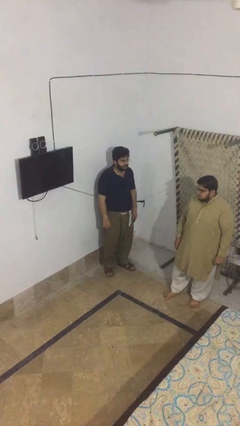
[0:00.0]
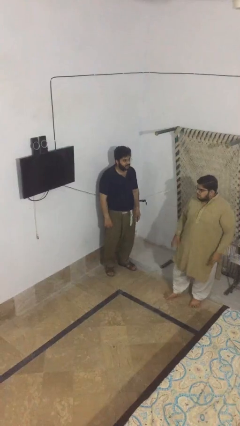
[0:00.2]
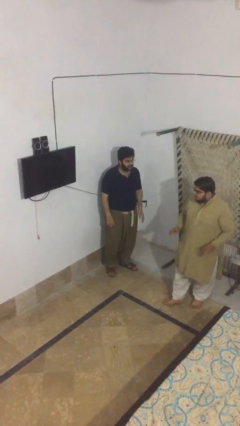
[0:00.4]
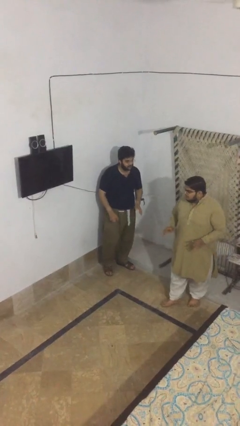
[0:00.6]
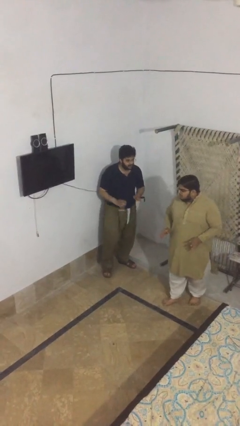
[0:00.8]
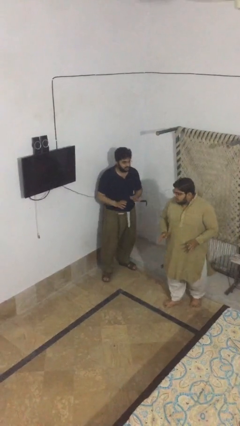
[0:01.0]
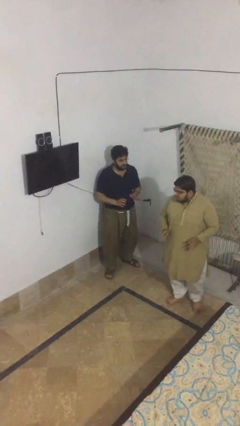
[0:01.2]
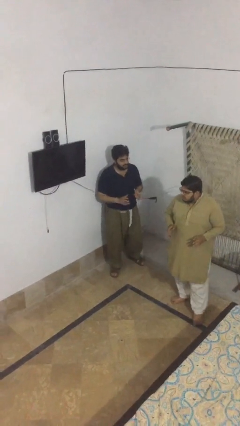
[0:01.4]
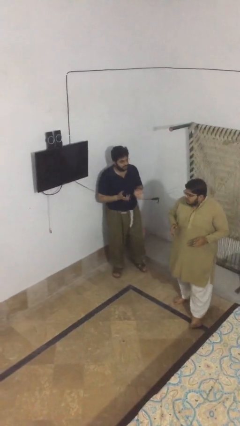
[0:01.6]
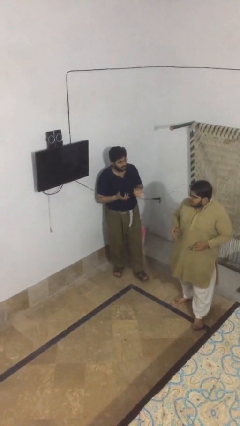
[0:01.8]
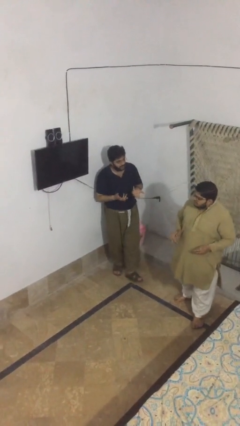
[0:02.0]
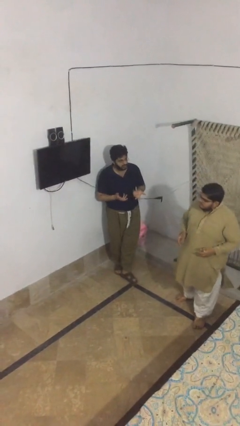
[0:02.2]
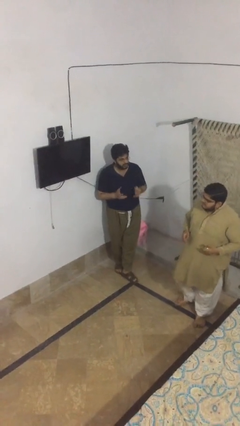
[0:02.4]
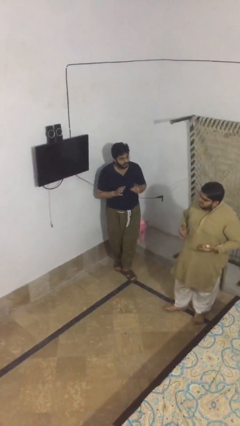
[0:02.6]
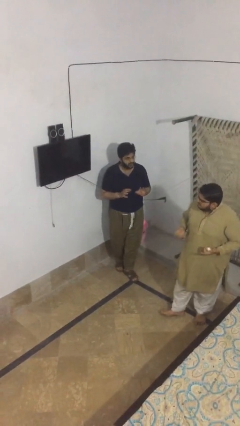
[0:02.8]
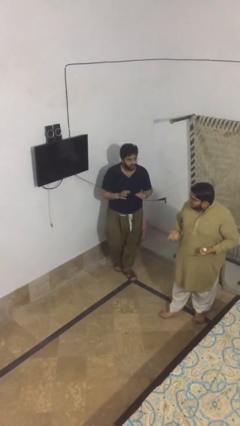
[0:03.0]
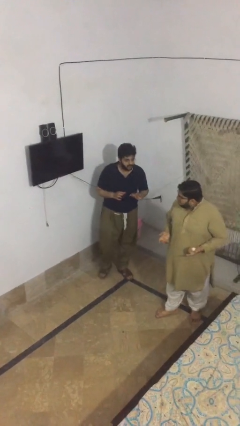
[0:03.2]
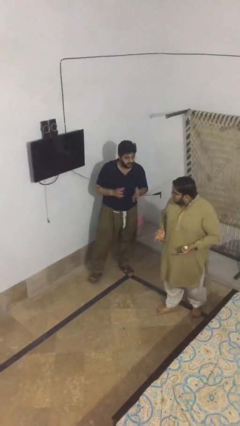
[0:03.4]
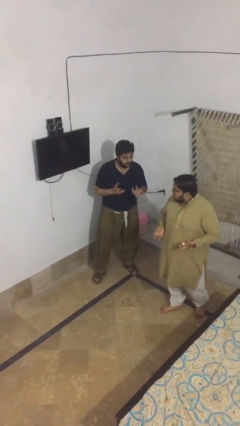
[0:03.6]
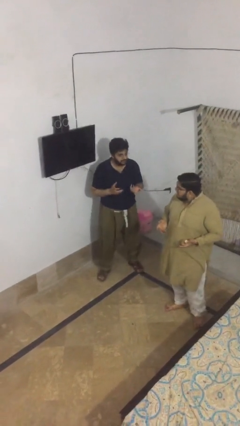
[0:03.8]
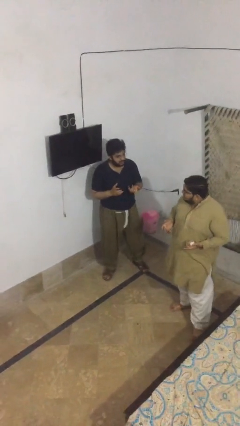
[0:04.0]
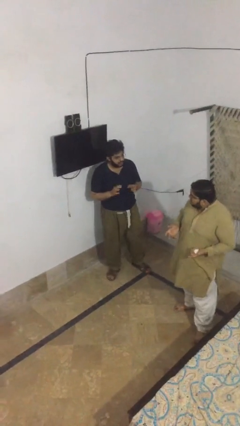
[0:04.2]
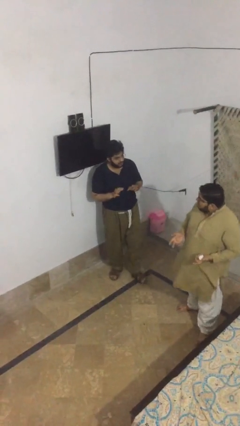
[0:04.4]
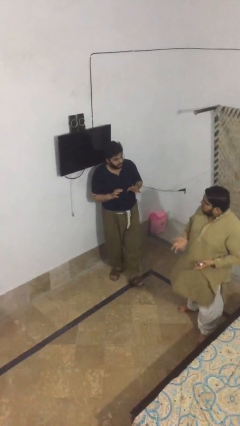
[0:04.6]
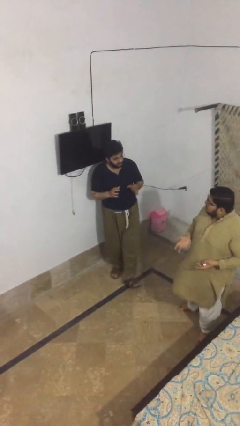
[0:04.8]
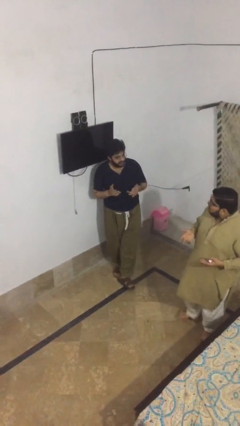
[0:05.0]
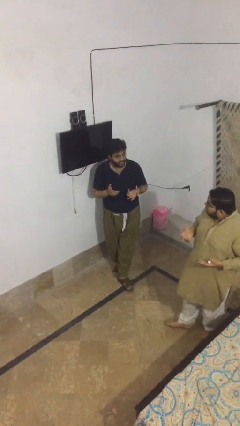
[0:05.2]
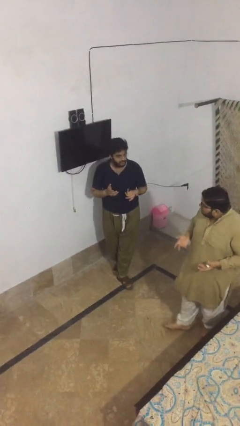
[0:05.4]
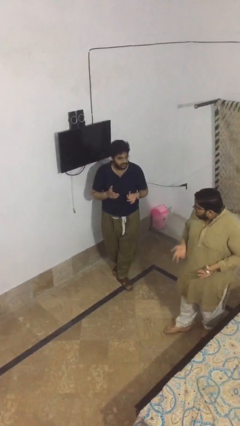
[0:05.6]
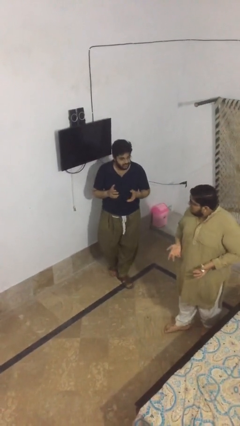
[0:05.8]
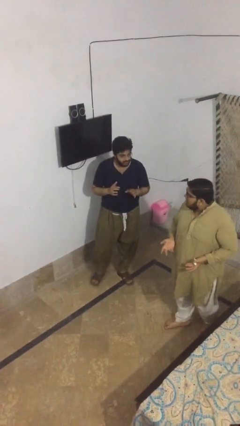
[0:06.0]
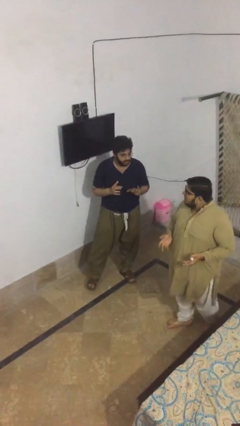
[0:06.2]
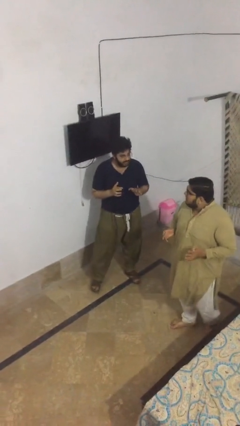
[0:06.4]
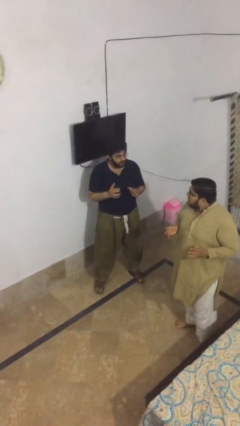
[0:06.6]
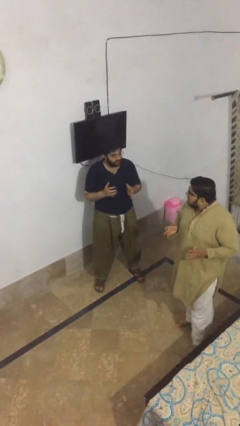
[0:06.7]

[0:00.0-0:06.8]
person talks to person

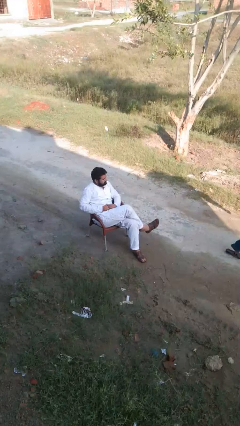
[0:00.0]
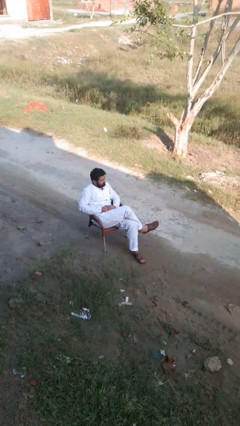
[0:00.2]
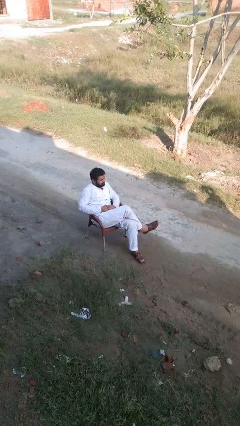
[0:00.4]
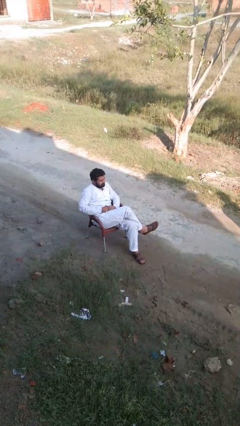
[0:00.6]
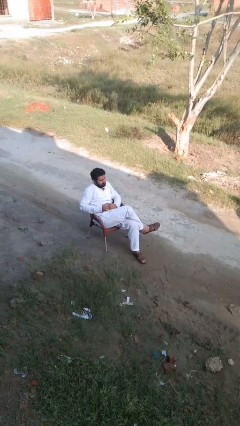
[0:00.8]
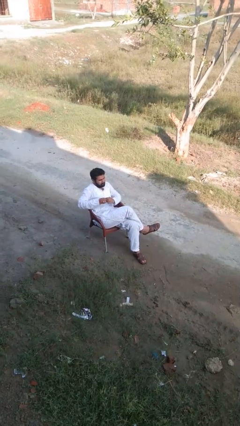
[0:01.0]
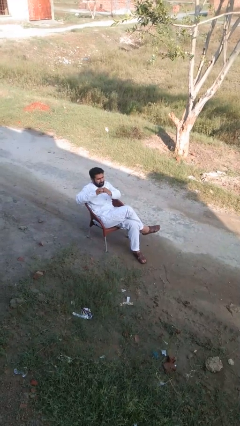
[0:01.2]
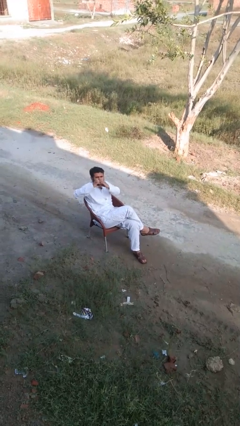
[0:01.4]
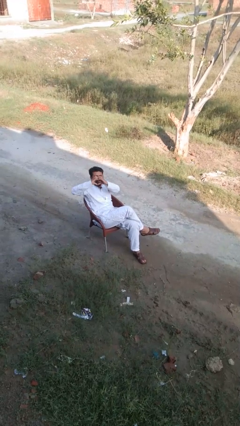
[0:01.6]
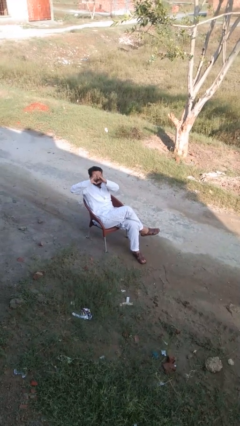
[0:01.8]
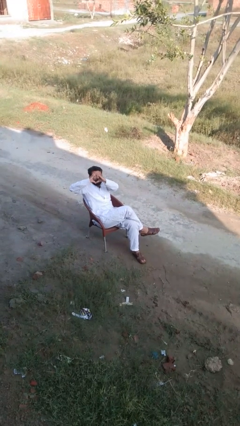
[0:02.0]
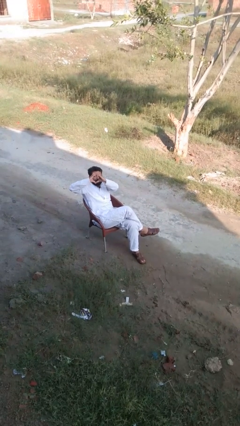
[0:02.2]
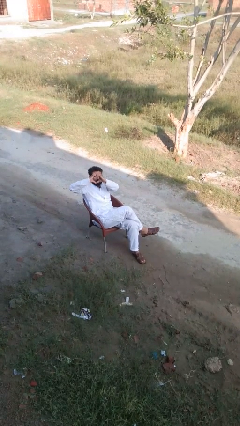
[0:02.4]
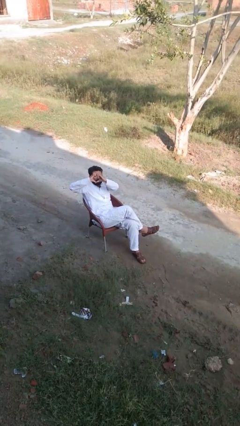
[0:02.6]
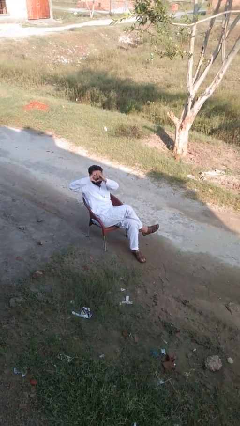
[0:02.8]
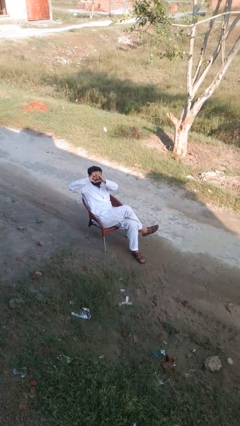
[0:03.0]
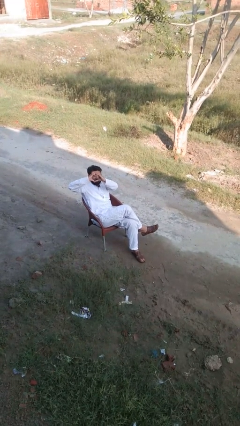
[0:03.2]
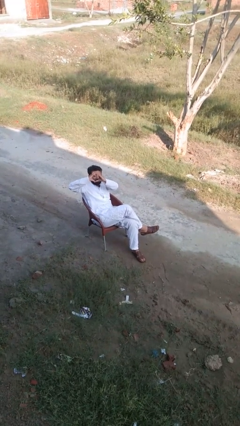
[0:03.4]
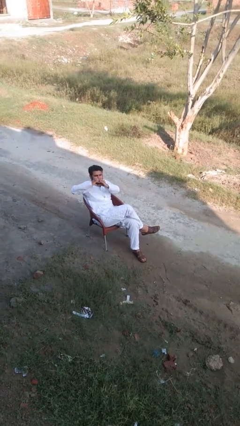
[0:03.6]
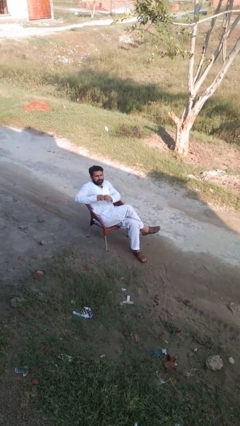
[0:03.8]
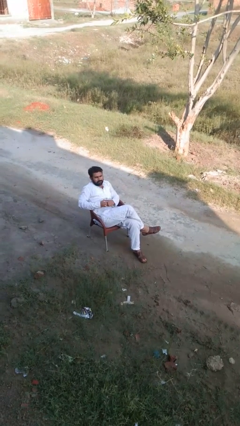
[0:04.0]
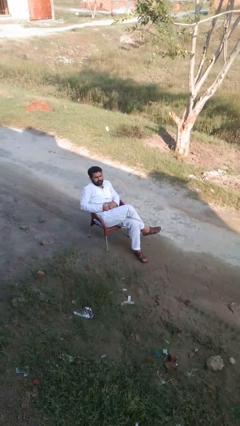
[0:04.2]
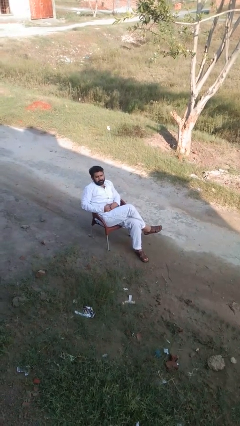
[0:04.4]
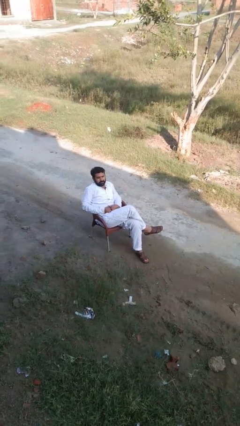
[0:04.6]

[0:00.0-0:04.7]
person gestures heart

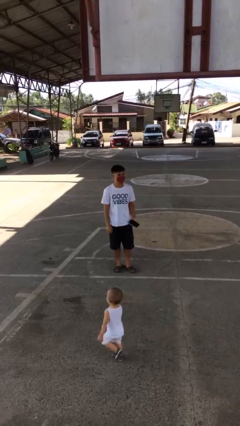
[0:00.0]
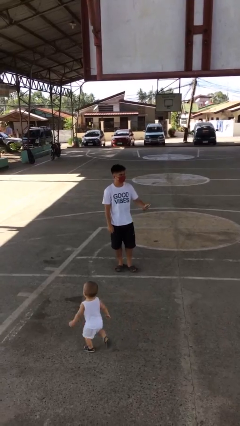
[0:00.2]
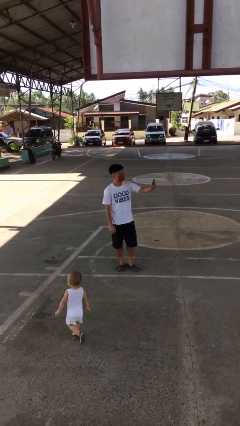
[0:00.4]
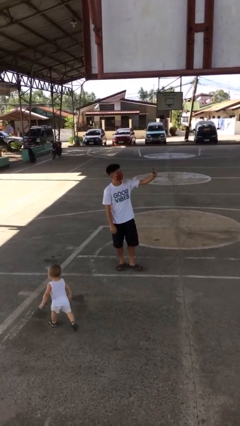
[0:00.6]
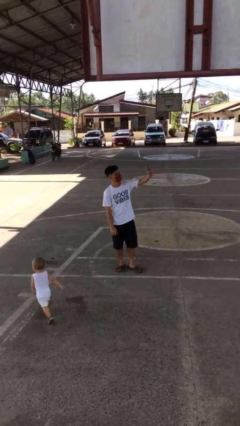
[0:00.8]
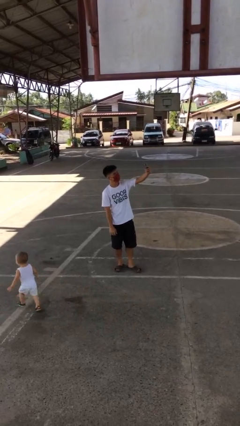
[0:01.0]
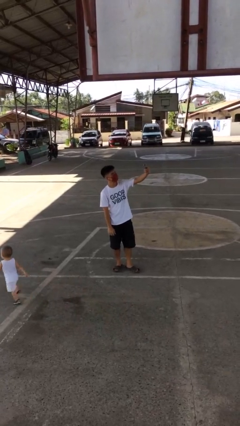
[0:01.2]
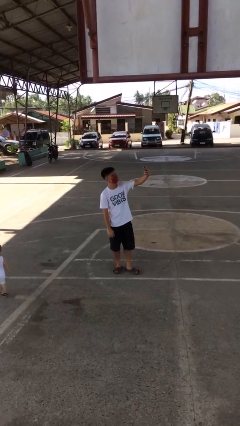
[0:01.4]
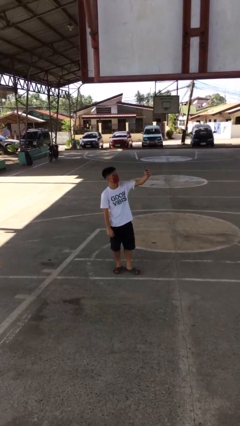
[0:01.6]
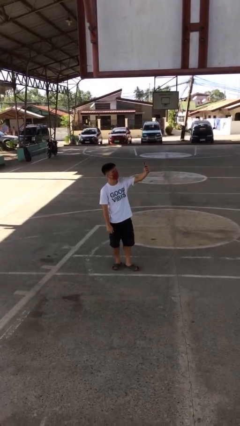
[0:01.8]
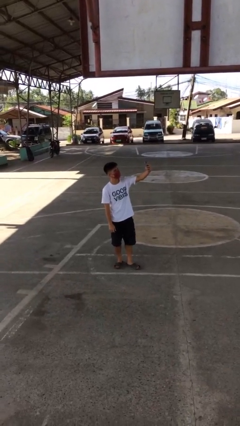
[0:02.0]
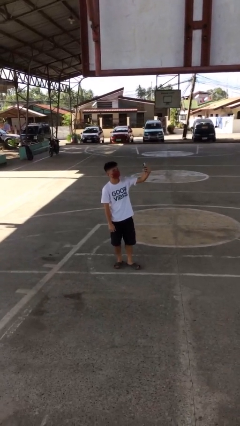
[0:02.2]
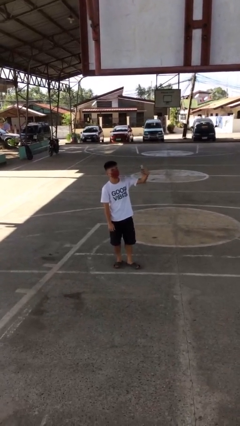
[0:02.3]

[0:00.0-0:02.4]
person takes selfie

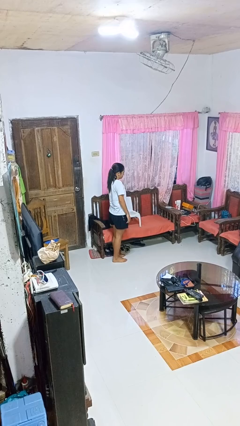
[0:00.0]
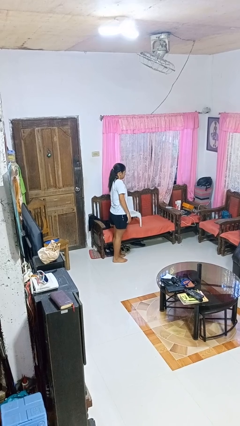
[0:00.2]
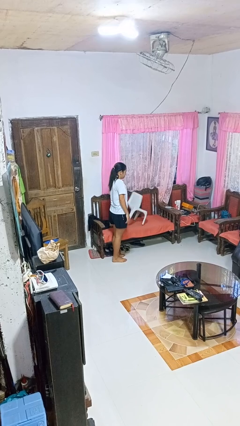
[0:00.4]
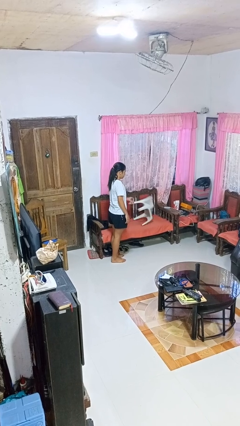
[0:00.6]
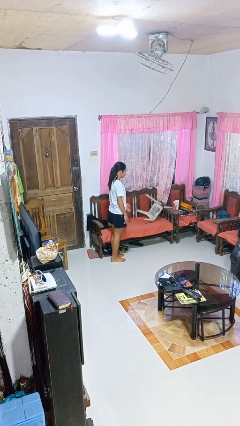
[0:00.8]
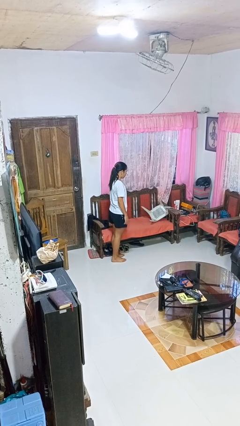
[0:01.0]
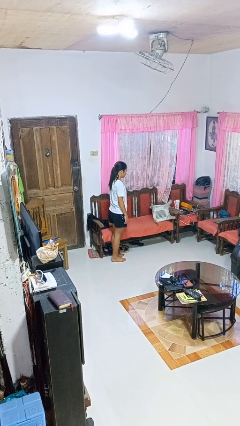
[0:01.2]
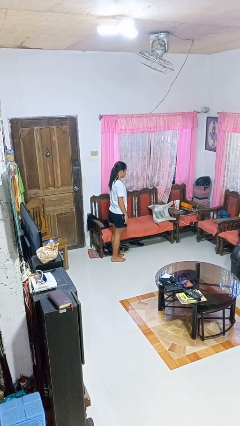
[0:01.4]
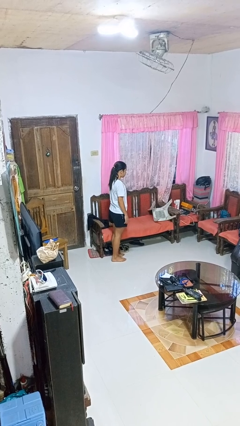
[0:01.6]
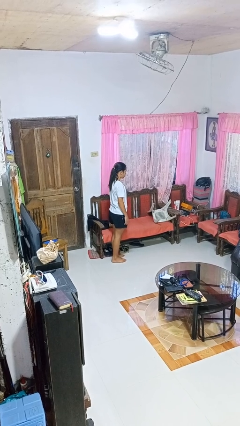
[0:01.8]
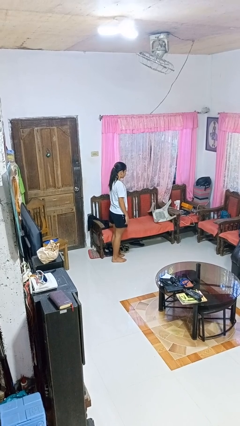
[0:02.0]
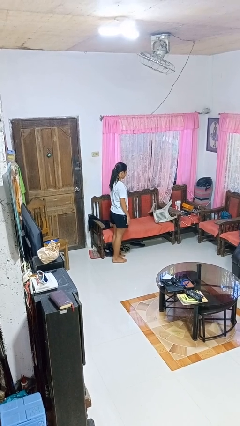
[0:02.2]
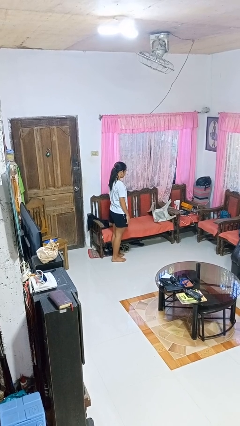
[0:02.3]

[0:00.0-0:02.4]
person knocks over furniture

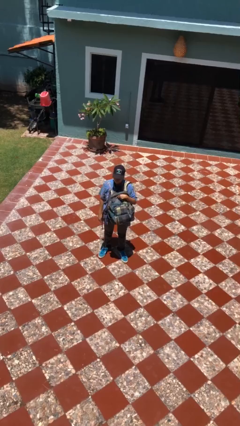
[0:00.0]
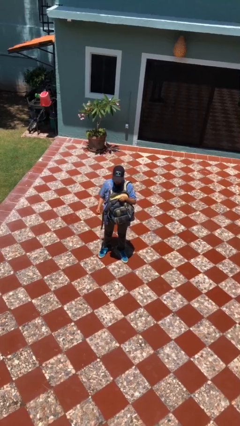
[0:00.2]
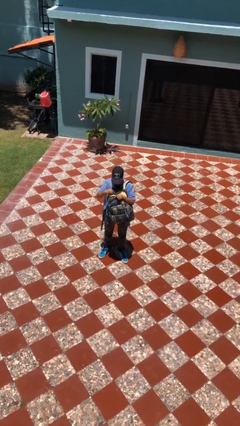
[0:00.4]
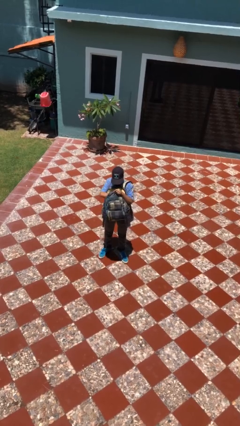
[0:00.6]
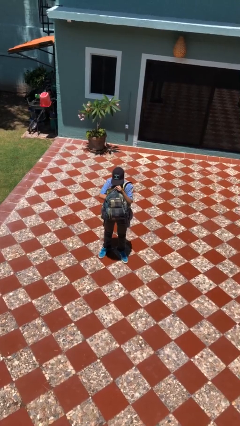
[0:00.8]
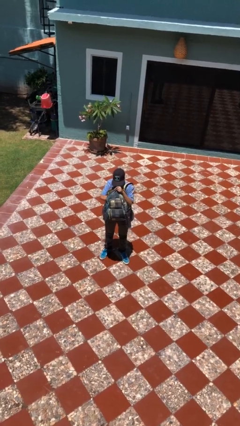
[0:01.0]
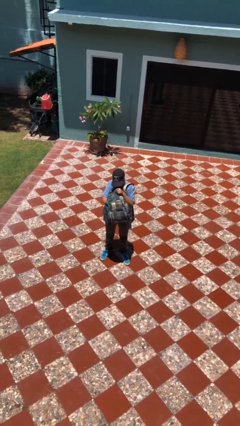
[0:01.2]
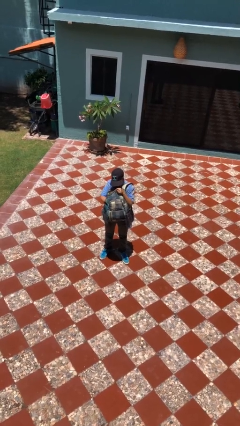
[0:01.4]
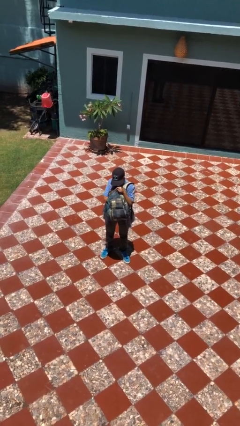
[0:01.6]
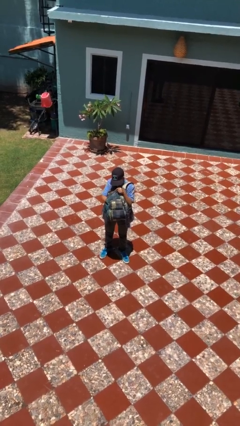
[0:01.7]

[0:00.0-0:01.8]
person searches in backpack
